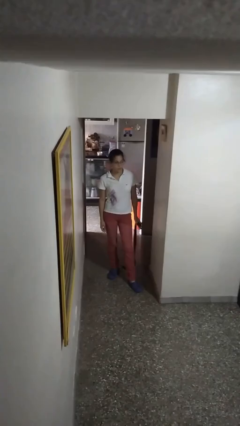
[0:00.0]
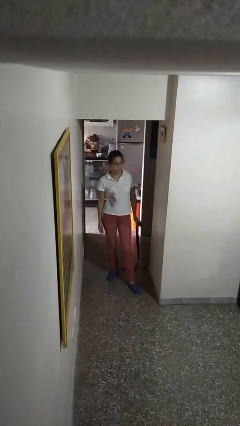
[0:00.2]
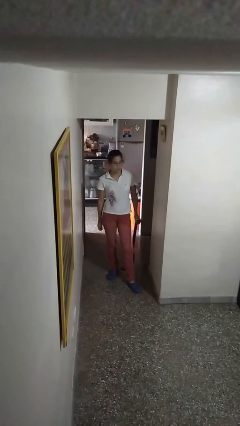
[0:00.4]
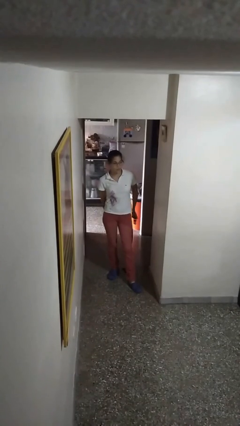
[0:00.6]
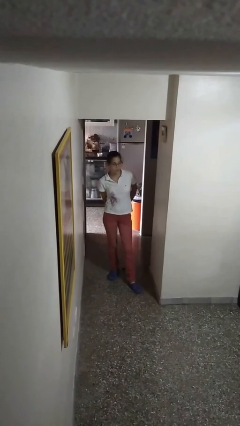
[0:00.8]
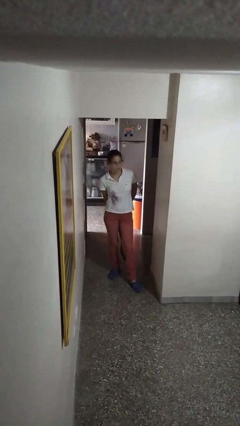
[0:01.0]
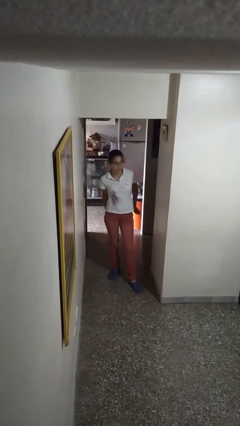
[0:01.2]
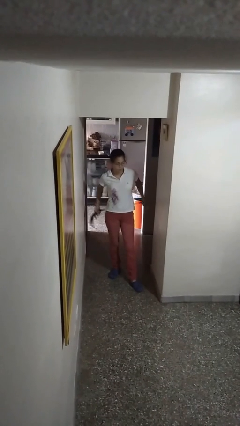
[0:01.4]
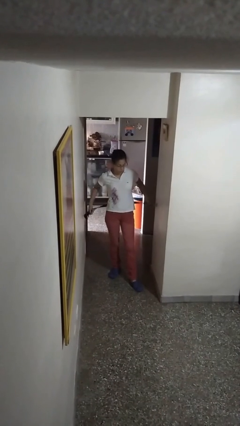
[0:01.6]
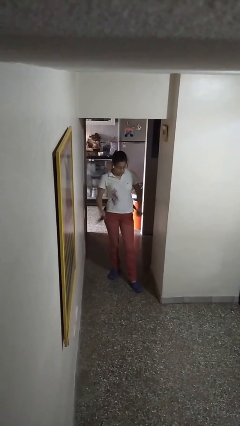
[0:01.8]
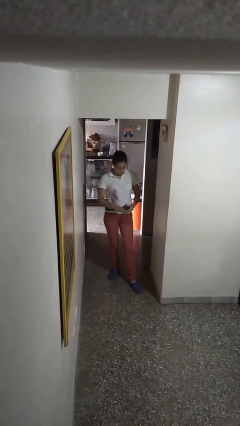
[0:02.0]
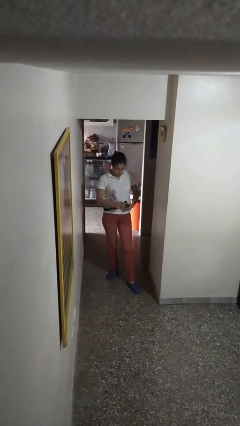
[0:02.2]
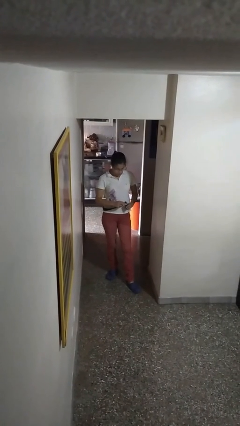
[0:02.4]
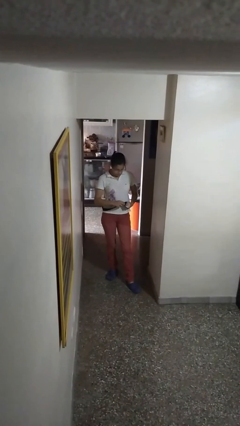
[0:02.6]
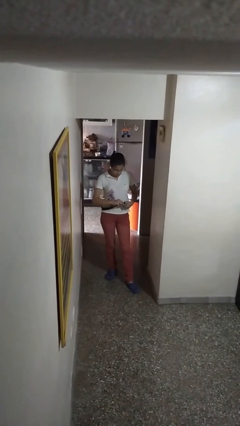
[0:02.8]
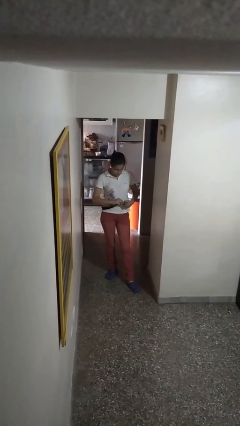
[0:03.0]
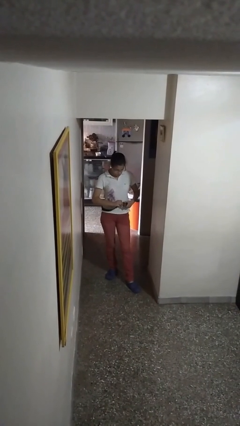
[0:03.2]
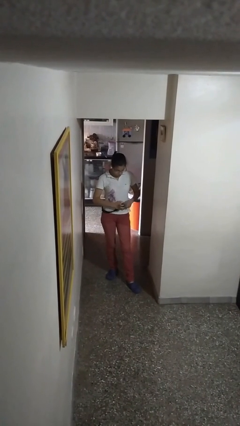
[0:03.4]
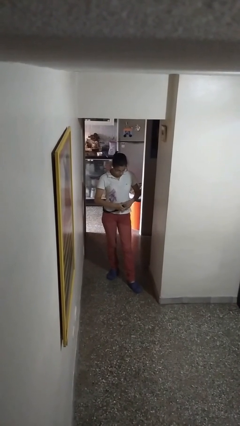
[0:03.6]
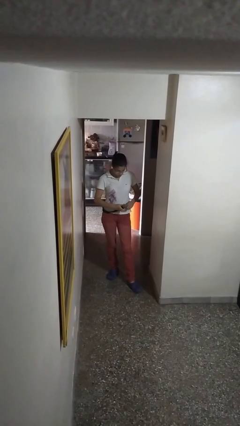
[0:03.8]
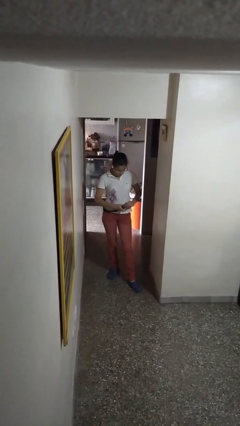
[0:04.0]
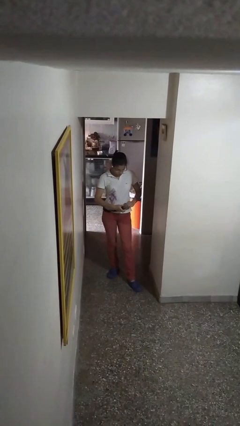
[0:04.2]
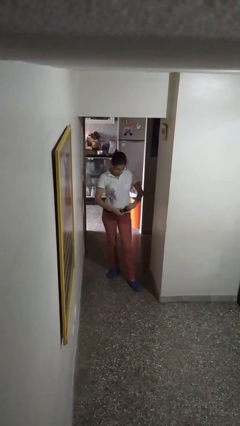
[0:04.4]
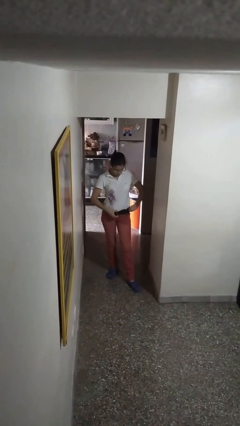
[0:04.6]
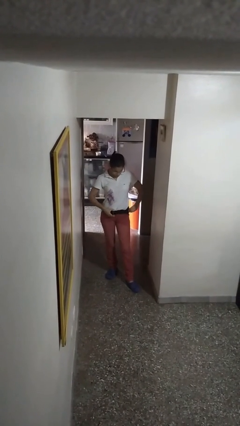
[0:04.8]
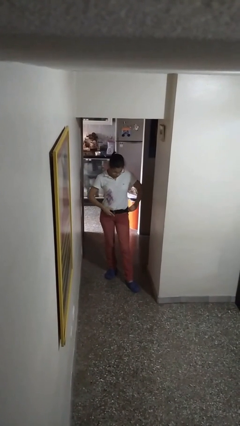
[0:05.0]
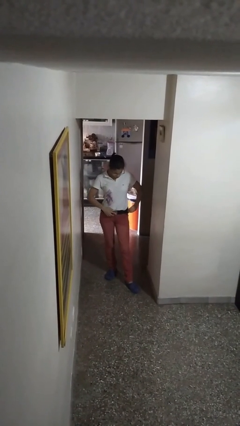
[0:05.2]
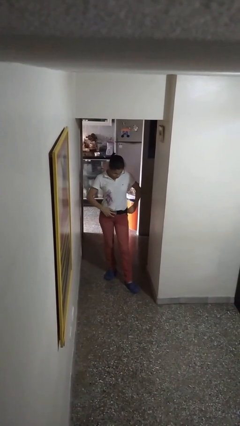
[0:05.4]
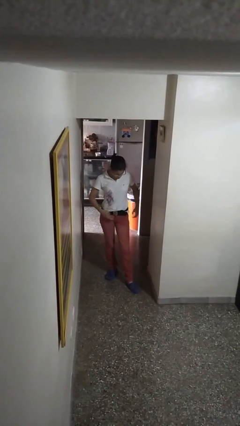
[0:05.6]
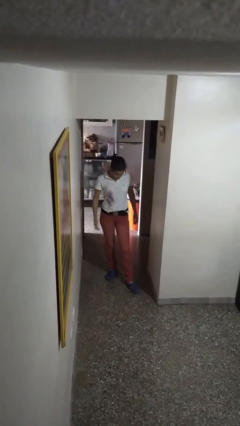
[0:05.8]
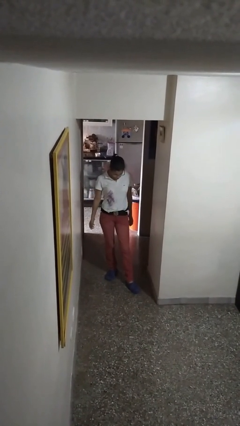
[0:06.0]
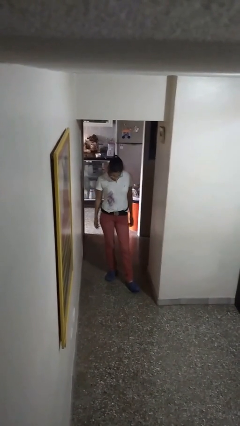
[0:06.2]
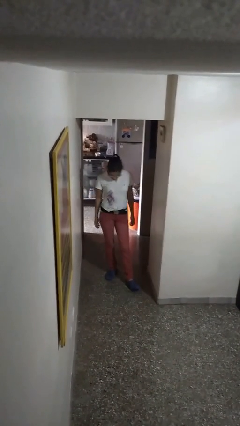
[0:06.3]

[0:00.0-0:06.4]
person puts on belt

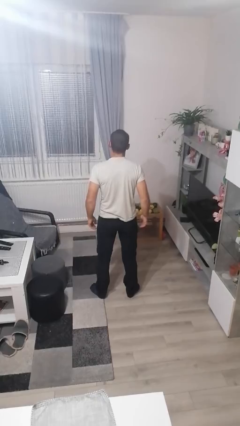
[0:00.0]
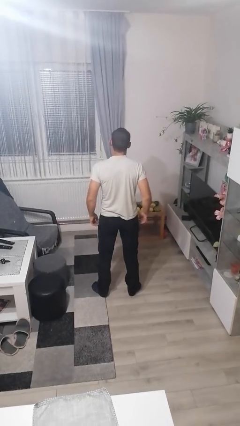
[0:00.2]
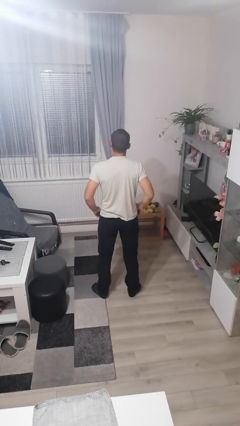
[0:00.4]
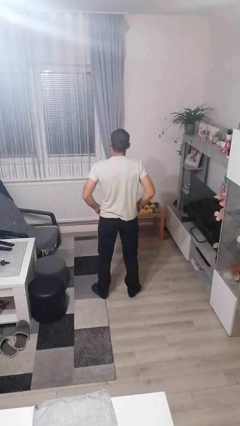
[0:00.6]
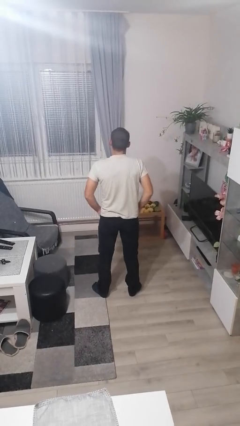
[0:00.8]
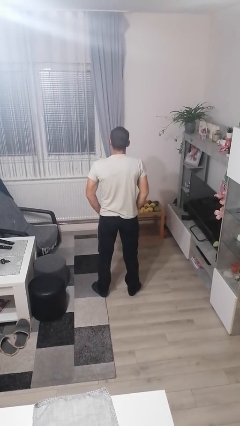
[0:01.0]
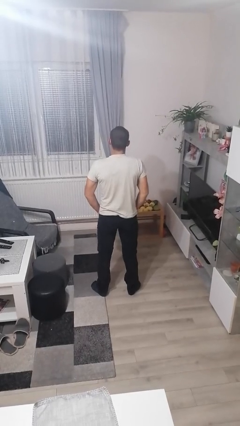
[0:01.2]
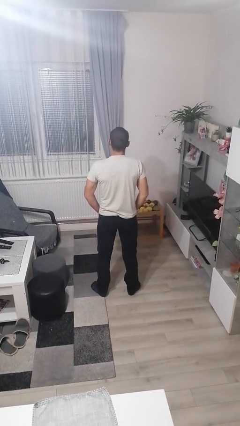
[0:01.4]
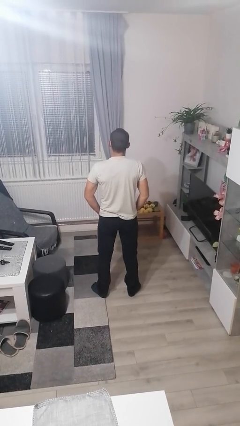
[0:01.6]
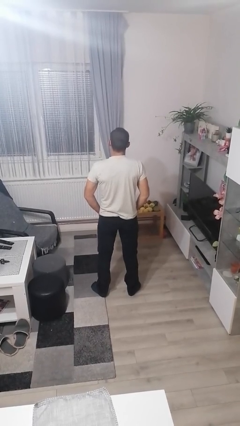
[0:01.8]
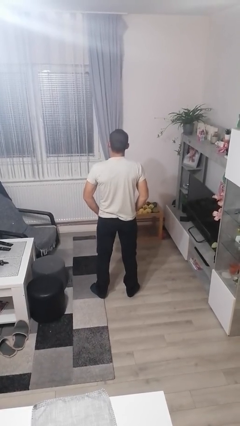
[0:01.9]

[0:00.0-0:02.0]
person puts hands in back pockets

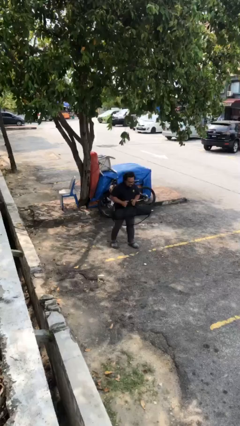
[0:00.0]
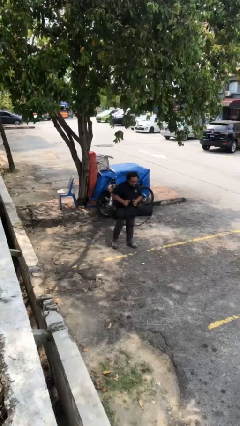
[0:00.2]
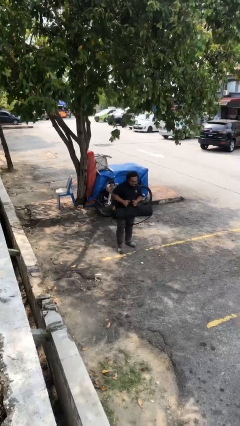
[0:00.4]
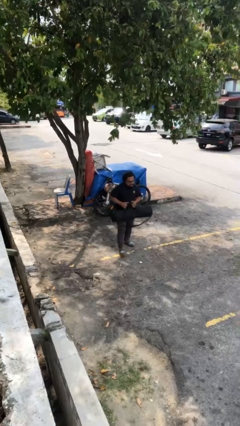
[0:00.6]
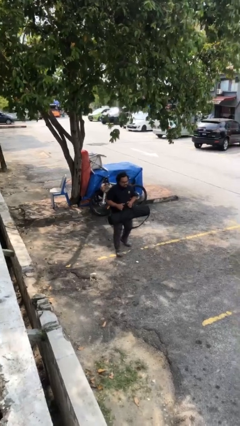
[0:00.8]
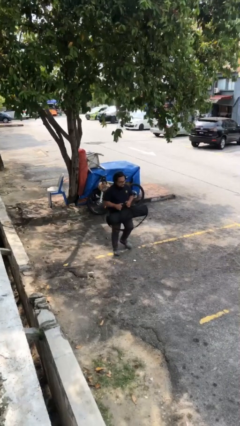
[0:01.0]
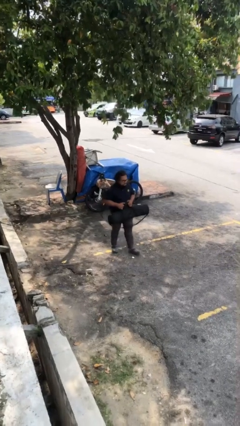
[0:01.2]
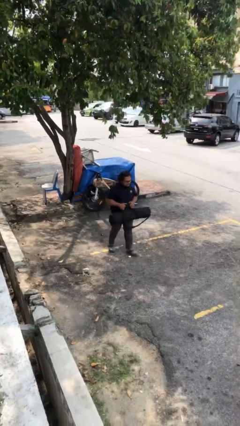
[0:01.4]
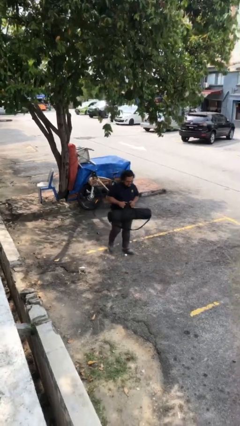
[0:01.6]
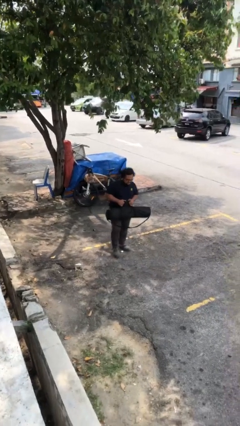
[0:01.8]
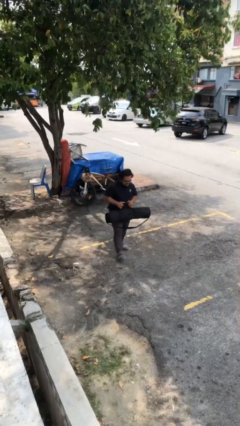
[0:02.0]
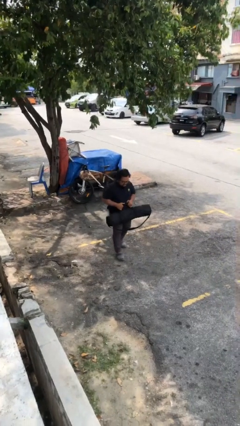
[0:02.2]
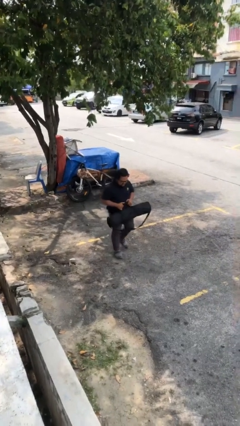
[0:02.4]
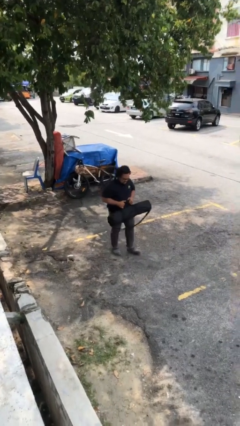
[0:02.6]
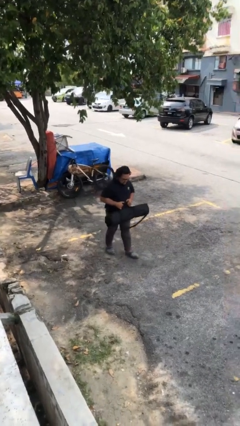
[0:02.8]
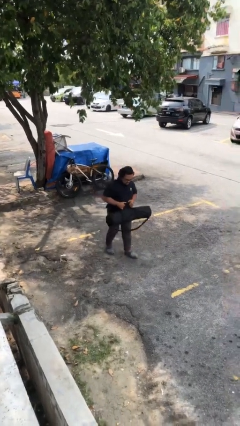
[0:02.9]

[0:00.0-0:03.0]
person carries heavy object

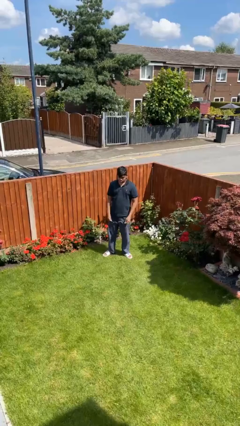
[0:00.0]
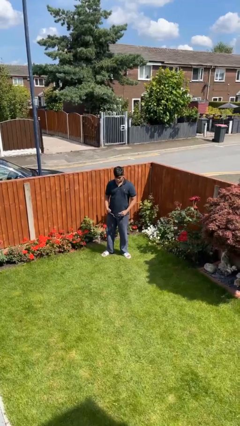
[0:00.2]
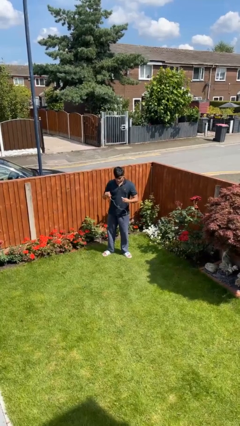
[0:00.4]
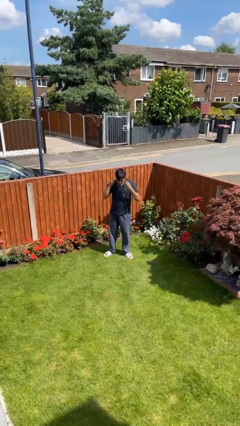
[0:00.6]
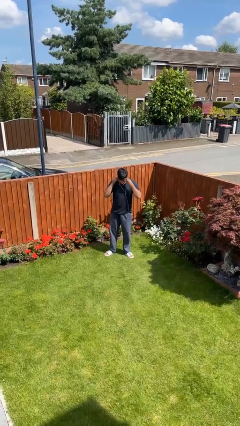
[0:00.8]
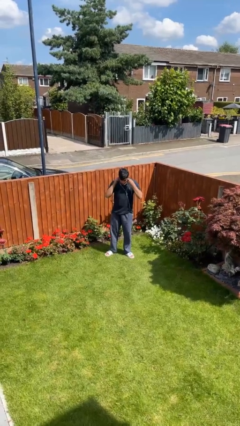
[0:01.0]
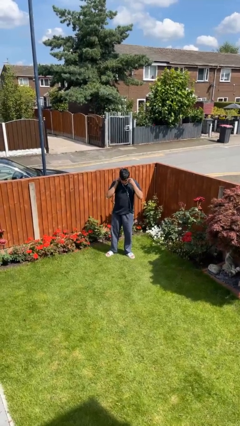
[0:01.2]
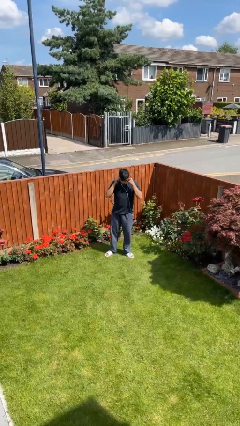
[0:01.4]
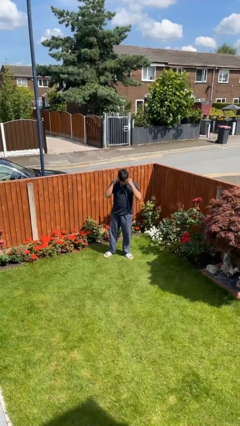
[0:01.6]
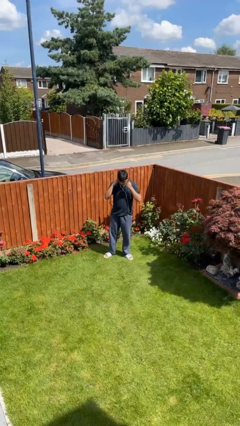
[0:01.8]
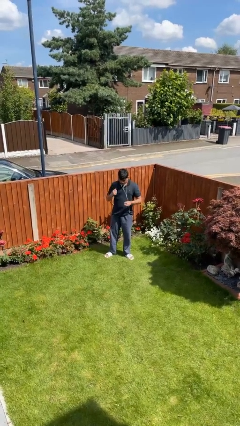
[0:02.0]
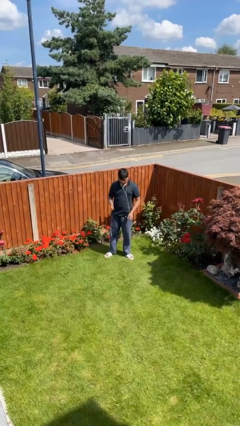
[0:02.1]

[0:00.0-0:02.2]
person puts on headphones

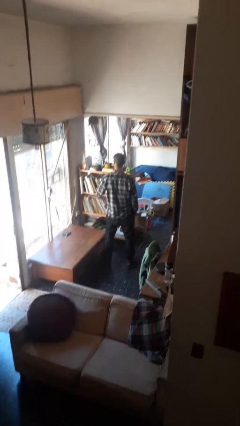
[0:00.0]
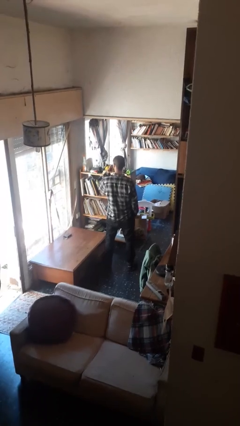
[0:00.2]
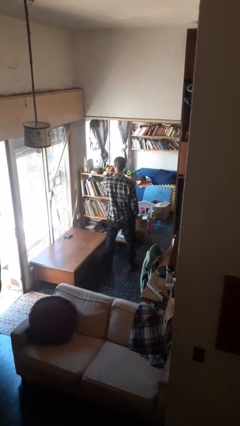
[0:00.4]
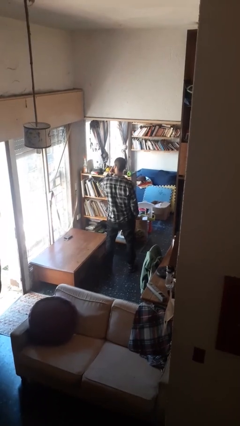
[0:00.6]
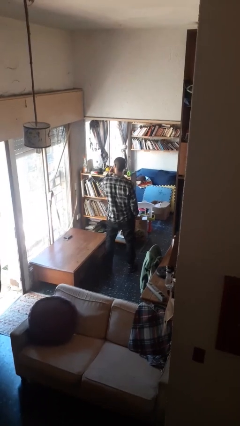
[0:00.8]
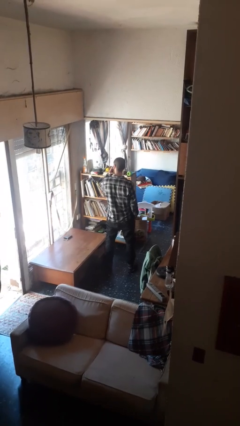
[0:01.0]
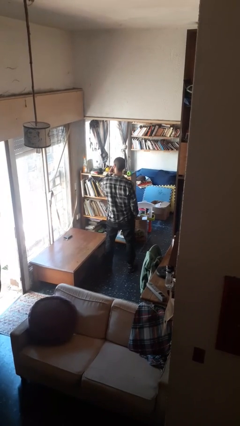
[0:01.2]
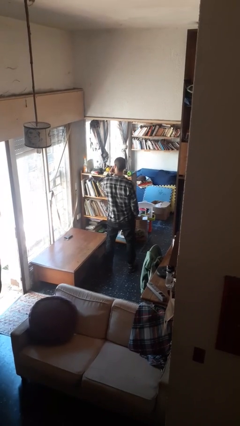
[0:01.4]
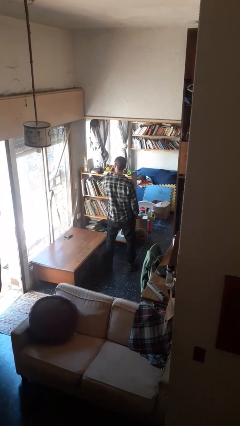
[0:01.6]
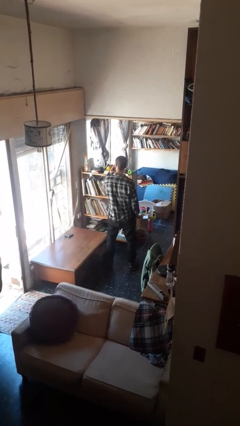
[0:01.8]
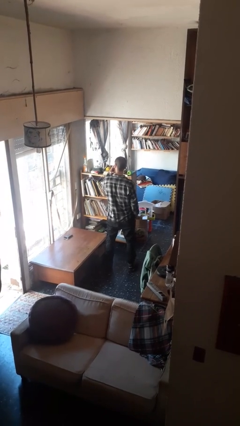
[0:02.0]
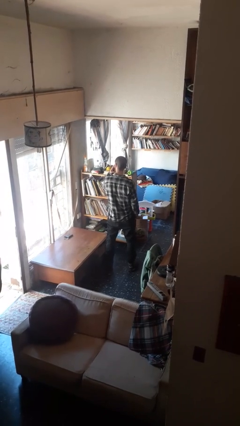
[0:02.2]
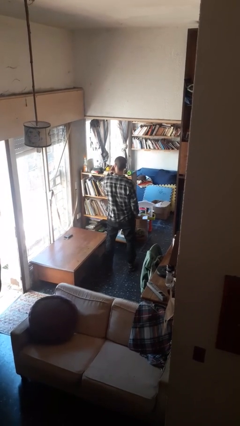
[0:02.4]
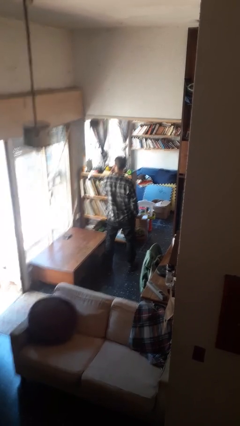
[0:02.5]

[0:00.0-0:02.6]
person gestures watch closely

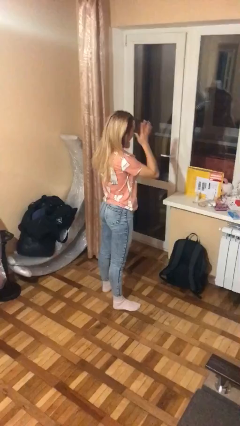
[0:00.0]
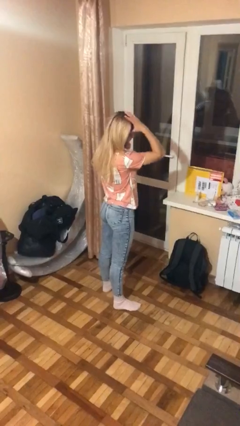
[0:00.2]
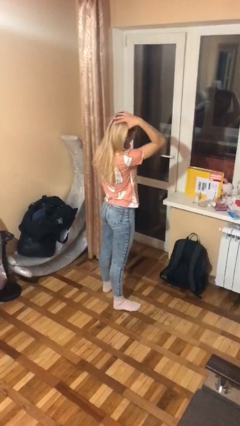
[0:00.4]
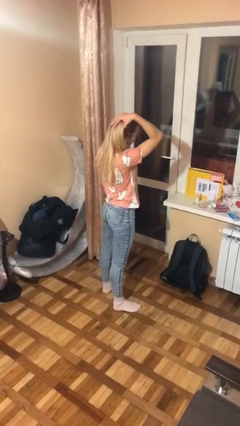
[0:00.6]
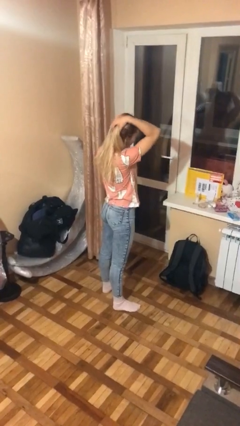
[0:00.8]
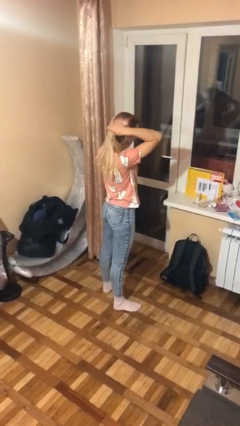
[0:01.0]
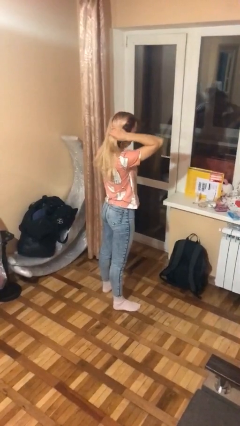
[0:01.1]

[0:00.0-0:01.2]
person strokes hair
